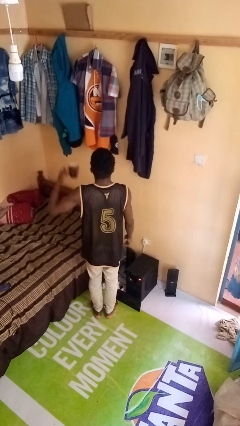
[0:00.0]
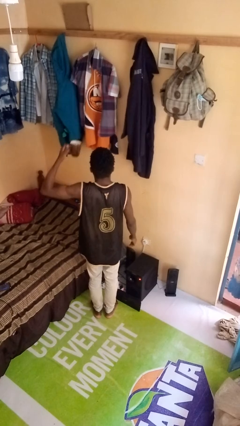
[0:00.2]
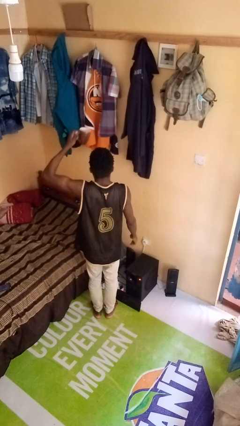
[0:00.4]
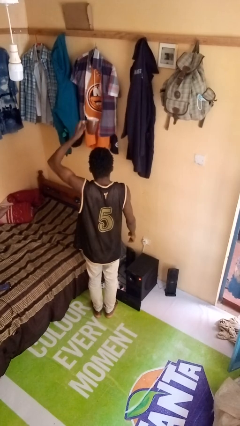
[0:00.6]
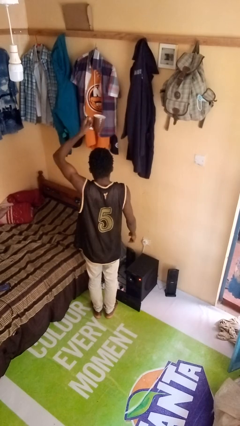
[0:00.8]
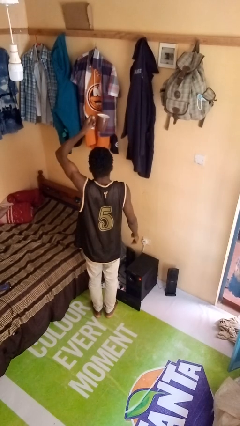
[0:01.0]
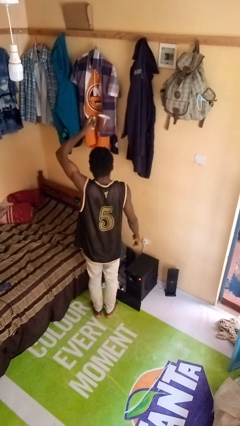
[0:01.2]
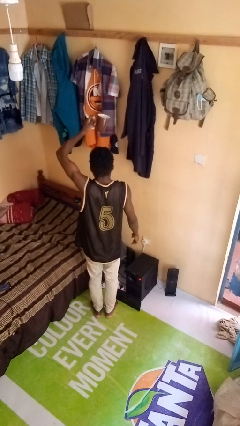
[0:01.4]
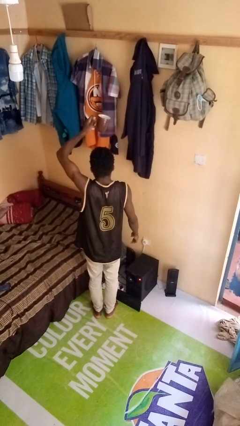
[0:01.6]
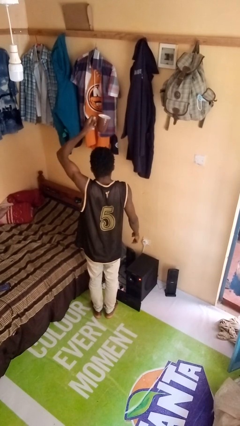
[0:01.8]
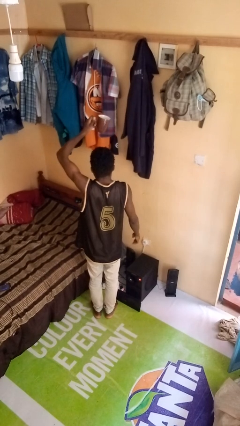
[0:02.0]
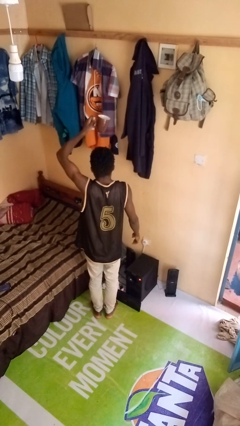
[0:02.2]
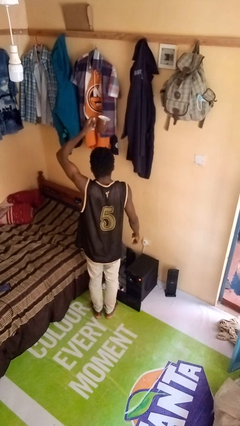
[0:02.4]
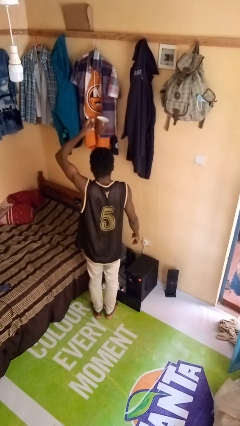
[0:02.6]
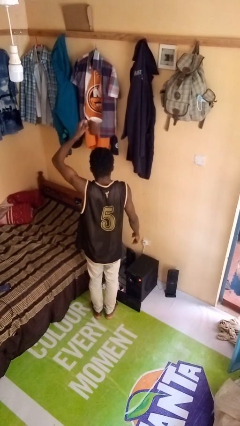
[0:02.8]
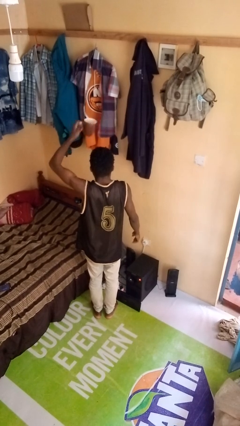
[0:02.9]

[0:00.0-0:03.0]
person holds object above head

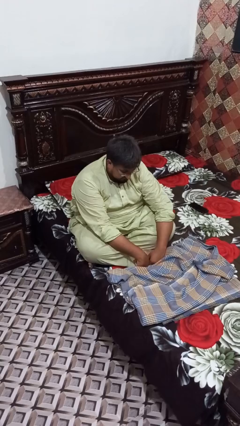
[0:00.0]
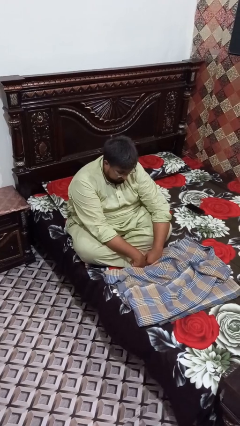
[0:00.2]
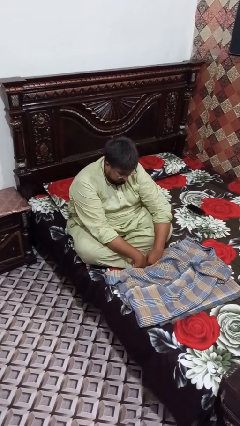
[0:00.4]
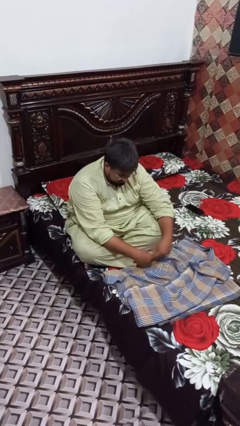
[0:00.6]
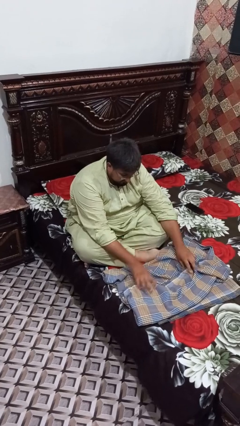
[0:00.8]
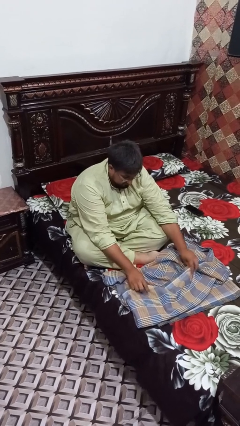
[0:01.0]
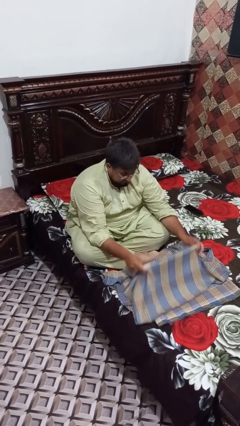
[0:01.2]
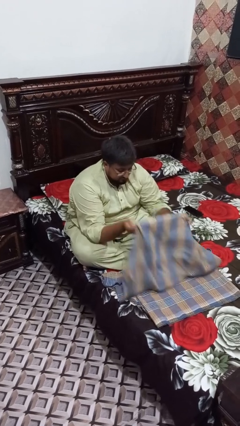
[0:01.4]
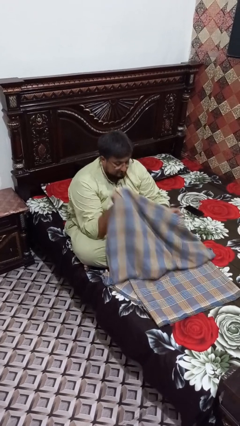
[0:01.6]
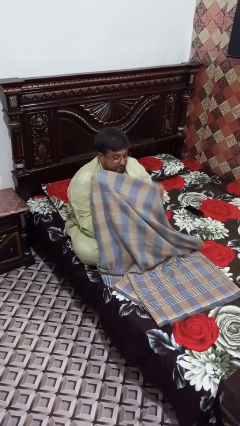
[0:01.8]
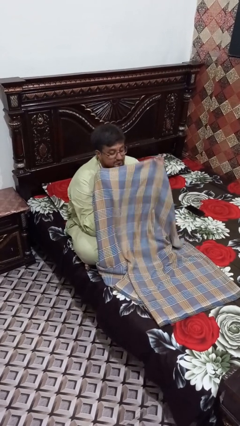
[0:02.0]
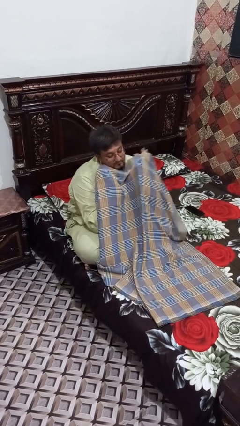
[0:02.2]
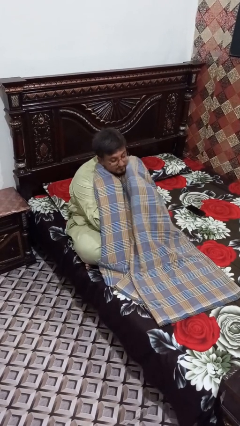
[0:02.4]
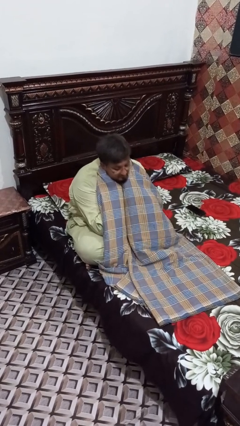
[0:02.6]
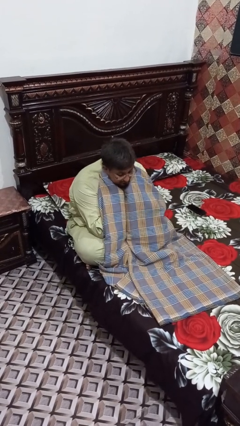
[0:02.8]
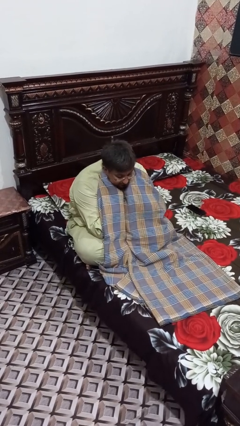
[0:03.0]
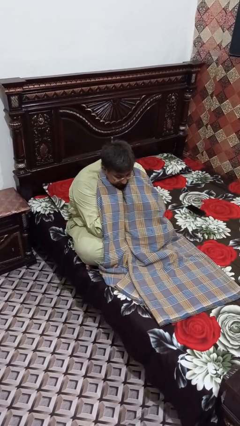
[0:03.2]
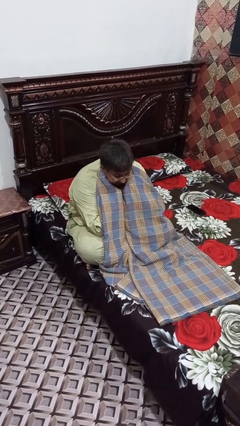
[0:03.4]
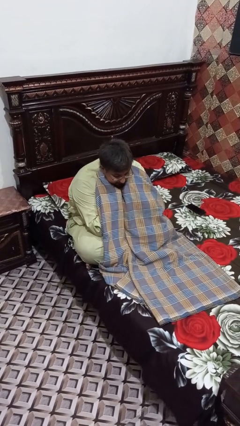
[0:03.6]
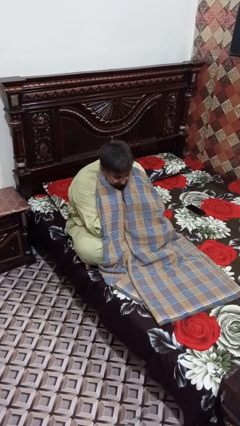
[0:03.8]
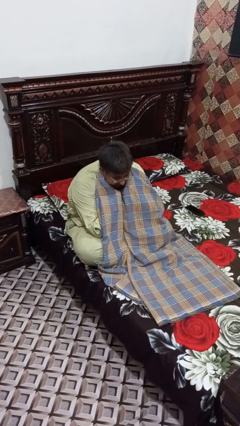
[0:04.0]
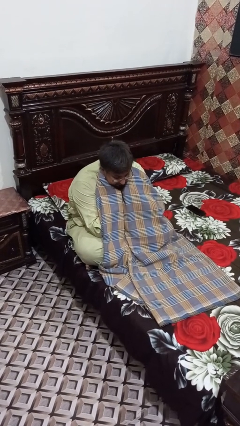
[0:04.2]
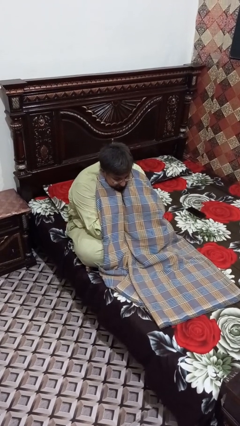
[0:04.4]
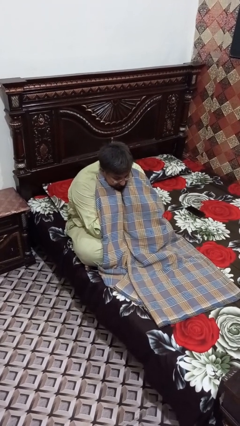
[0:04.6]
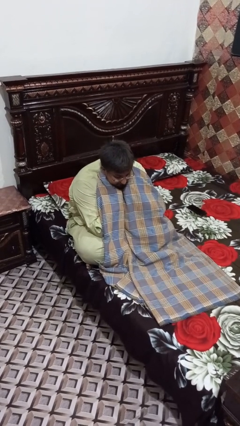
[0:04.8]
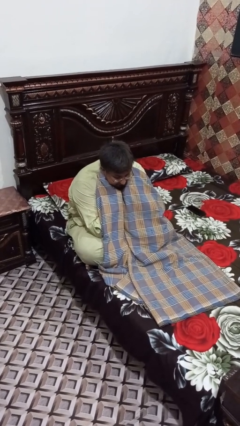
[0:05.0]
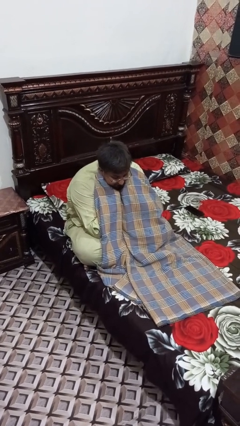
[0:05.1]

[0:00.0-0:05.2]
person covers with blanket

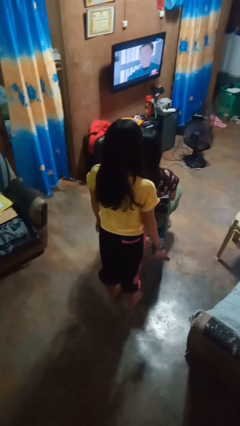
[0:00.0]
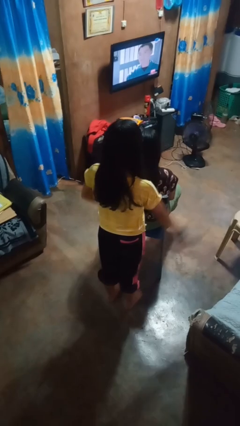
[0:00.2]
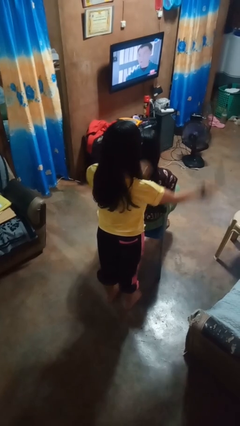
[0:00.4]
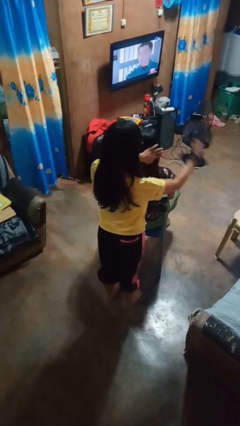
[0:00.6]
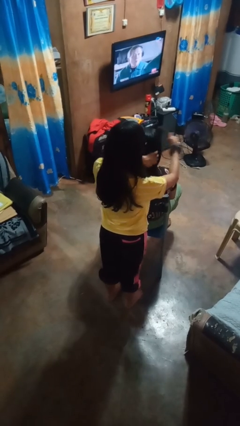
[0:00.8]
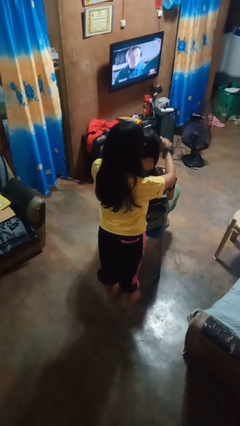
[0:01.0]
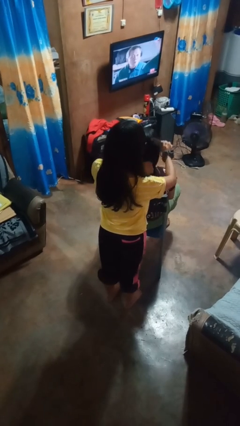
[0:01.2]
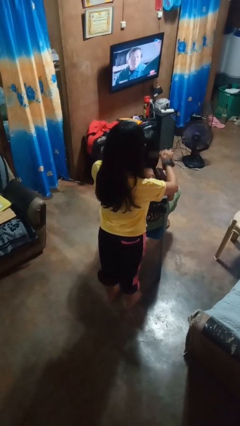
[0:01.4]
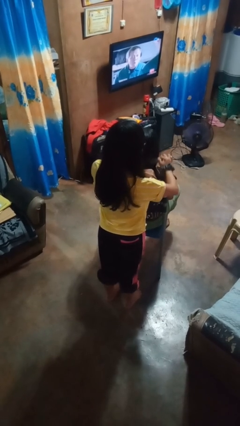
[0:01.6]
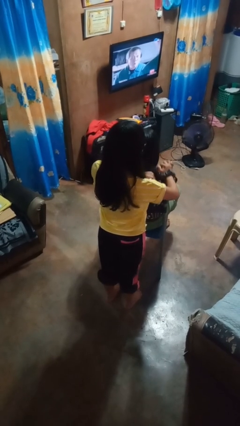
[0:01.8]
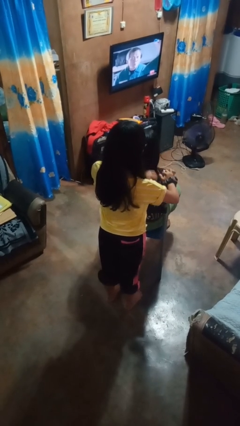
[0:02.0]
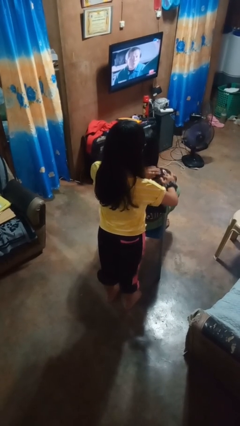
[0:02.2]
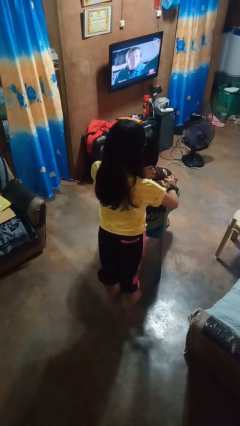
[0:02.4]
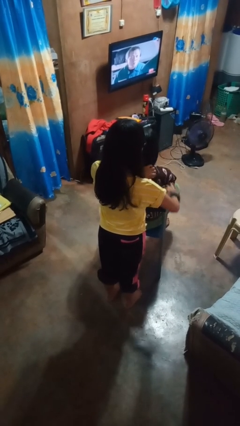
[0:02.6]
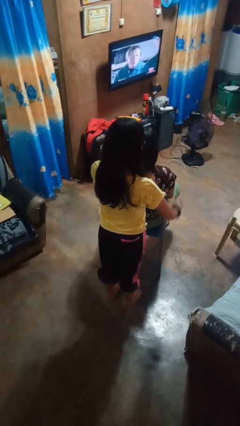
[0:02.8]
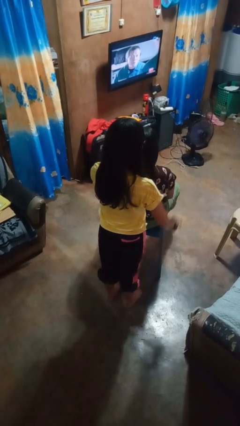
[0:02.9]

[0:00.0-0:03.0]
person brushes hair of person

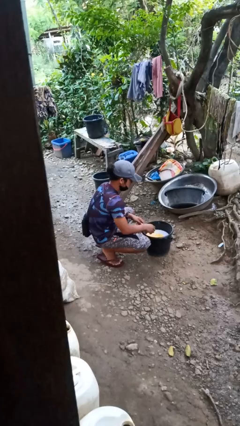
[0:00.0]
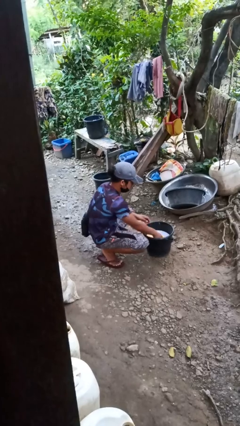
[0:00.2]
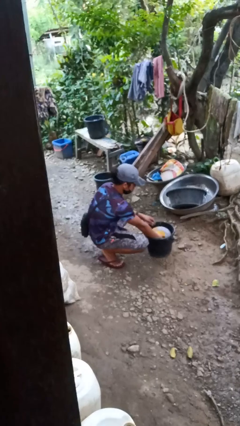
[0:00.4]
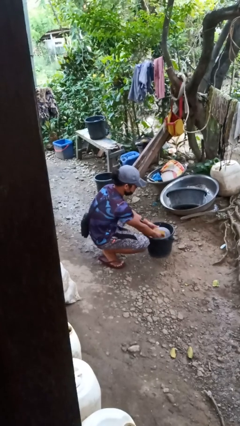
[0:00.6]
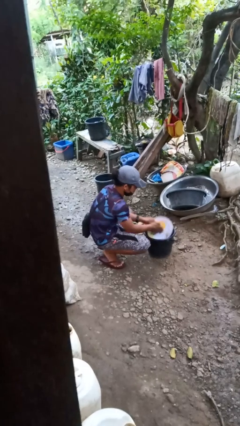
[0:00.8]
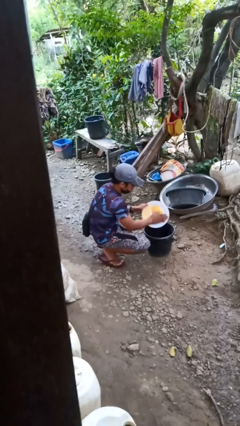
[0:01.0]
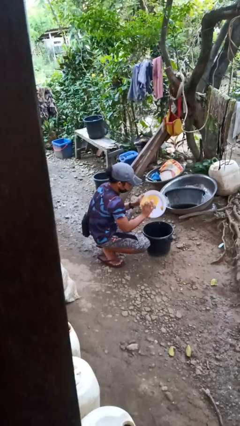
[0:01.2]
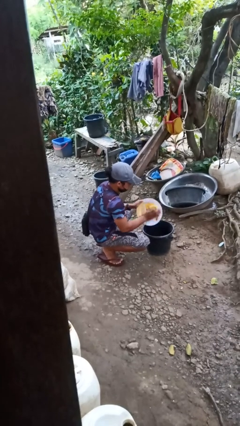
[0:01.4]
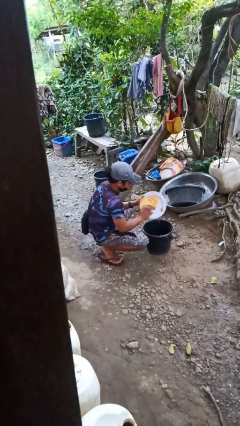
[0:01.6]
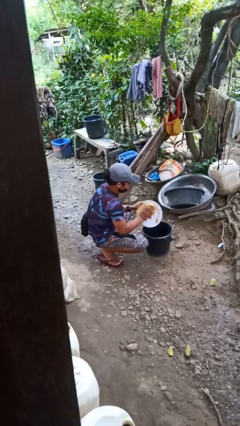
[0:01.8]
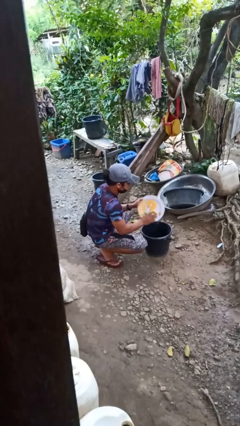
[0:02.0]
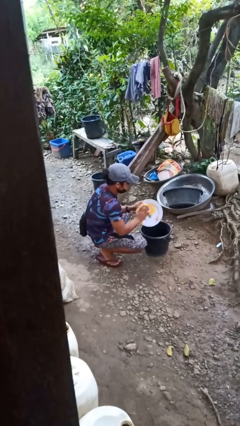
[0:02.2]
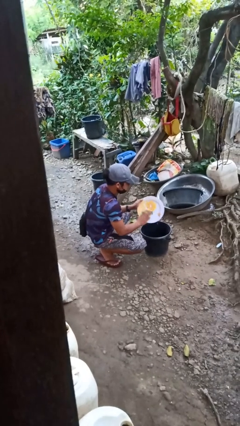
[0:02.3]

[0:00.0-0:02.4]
person washes dish

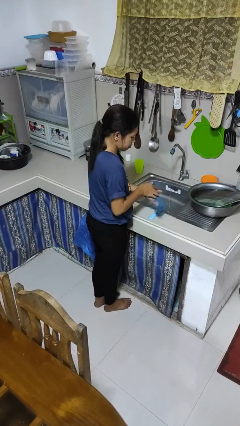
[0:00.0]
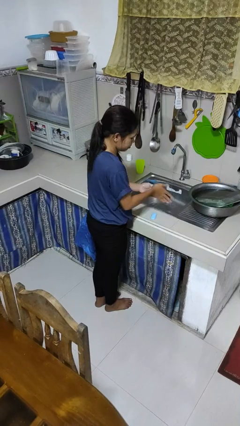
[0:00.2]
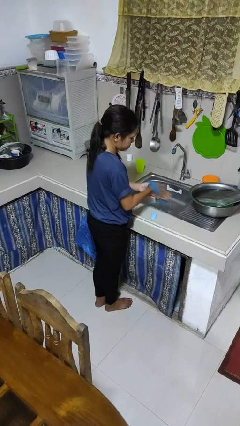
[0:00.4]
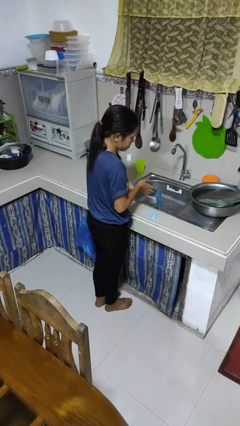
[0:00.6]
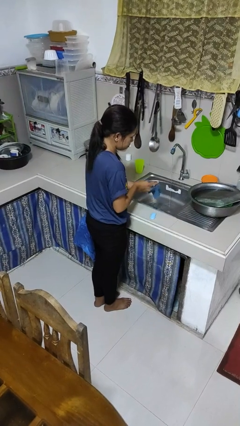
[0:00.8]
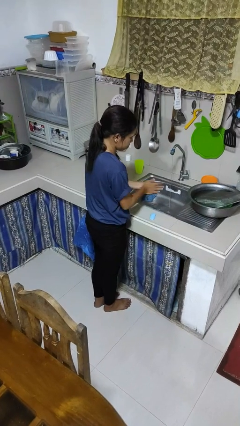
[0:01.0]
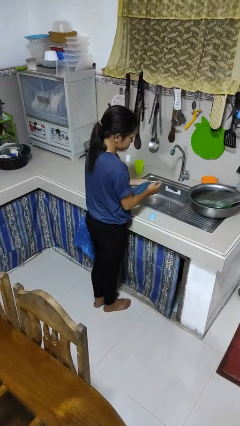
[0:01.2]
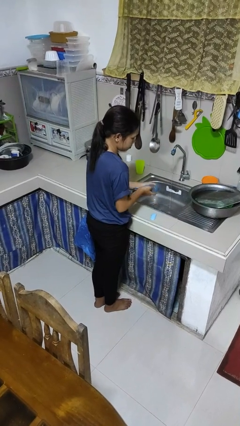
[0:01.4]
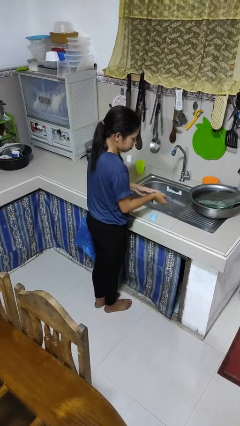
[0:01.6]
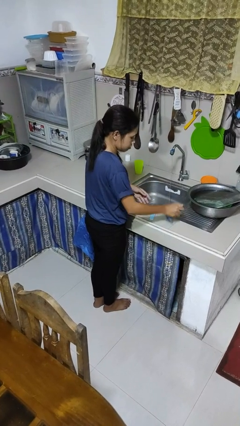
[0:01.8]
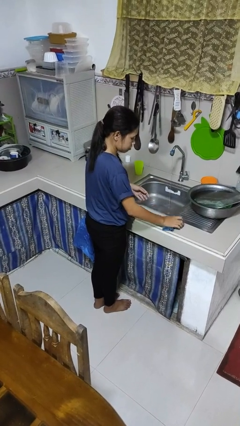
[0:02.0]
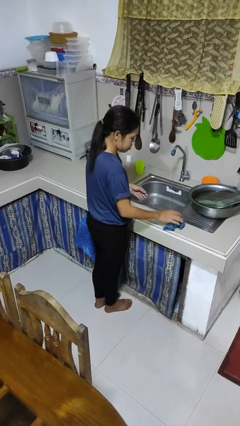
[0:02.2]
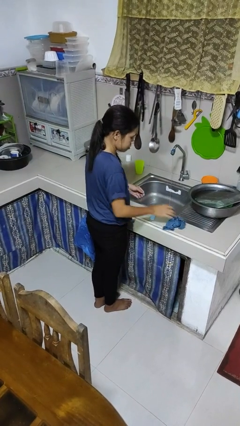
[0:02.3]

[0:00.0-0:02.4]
person dries hands with towel

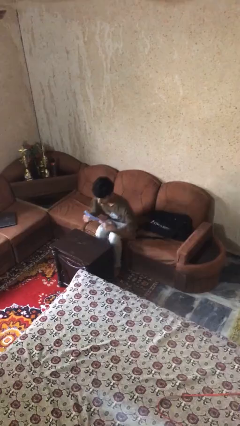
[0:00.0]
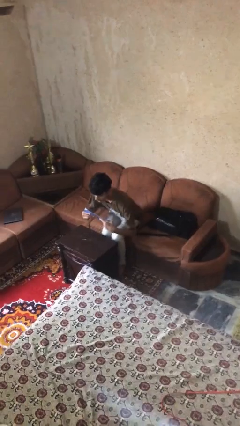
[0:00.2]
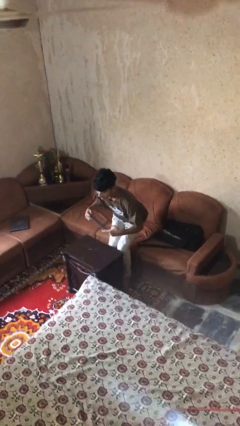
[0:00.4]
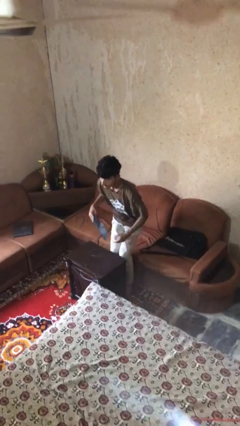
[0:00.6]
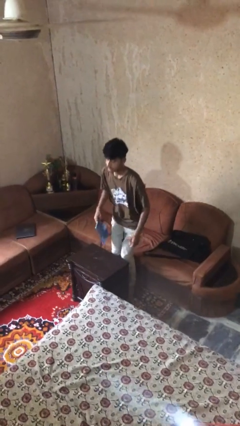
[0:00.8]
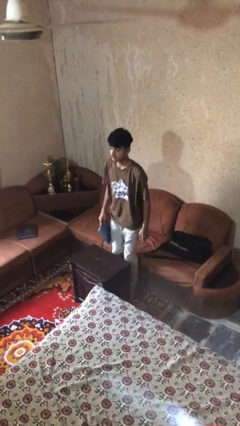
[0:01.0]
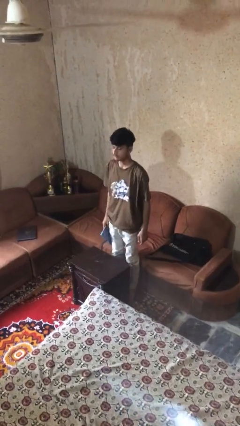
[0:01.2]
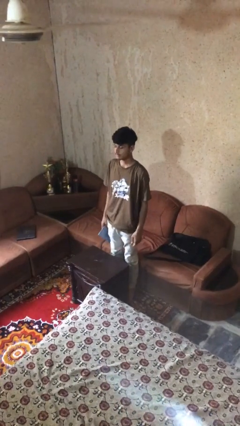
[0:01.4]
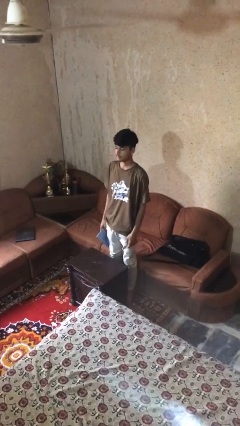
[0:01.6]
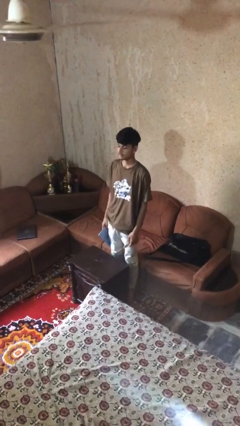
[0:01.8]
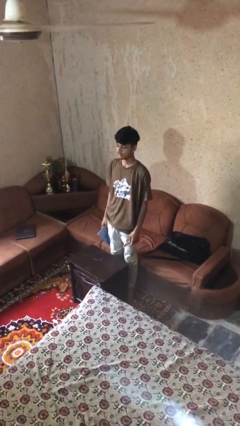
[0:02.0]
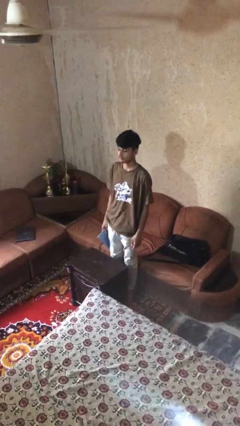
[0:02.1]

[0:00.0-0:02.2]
person stands up
